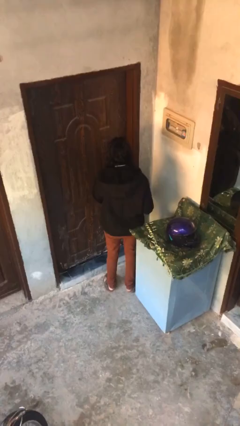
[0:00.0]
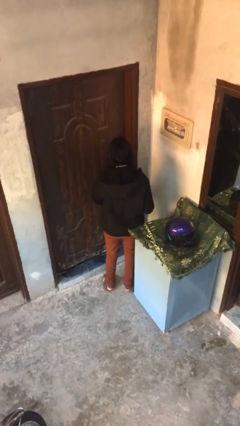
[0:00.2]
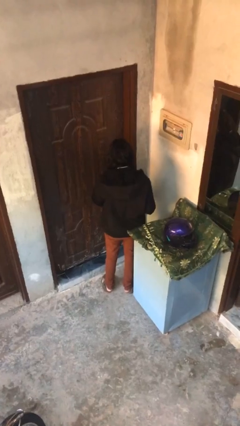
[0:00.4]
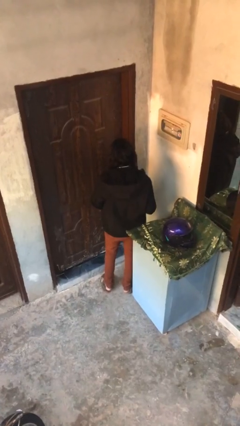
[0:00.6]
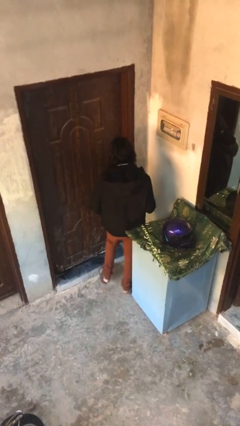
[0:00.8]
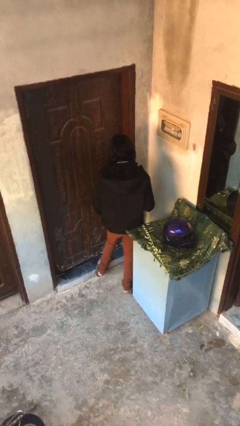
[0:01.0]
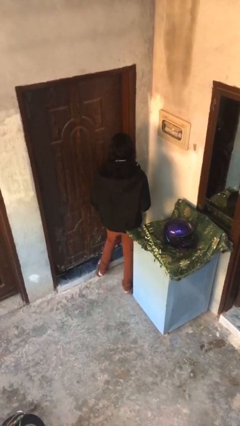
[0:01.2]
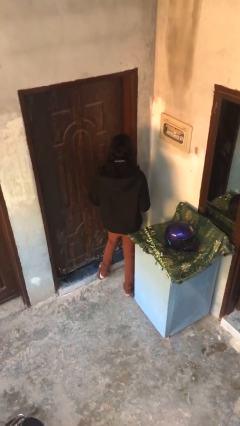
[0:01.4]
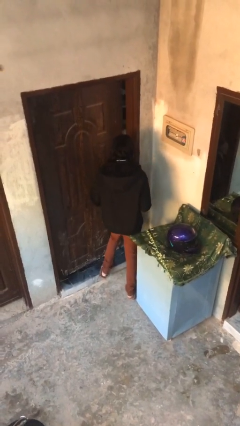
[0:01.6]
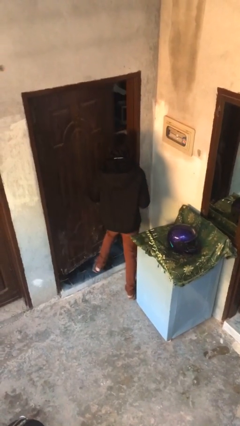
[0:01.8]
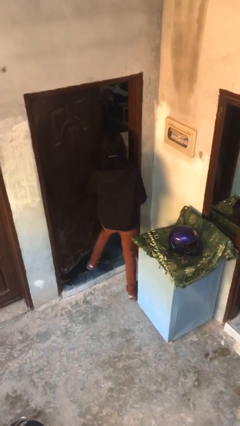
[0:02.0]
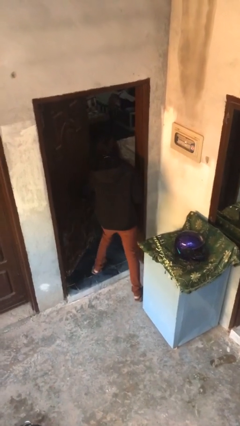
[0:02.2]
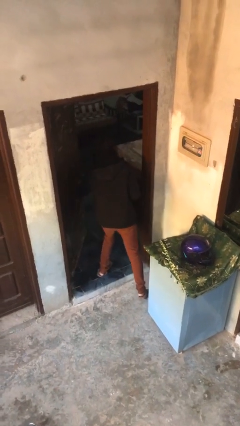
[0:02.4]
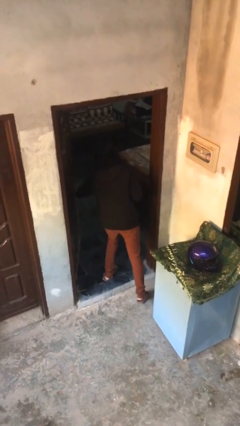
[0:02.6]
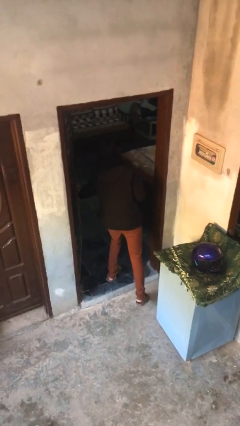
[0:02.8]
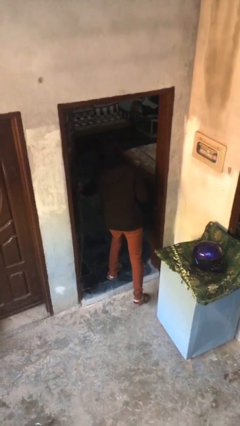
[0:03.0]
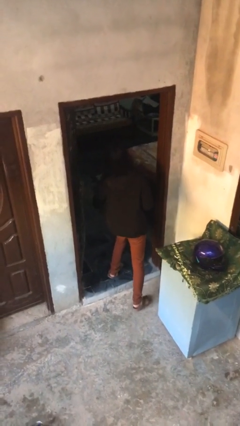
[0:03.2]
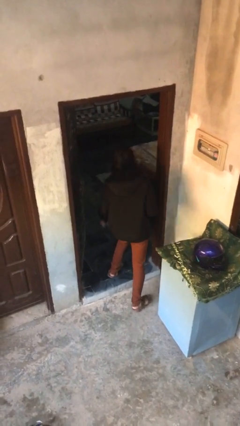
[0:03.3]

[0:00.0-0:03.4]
person opens facility door

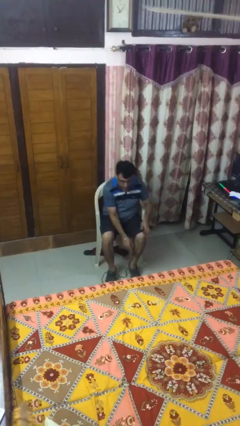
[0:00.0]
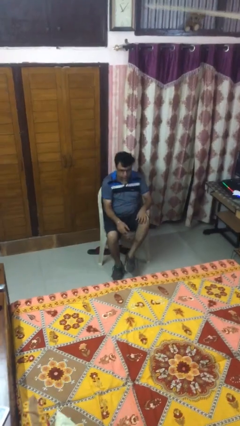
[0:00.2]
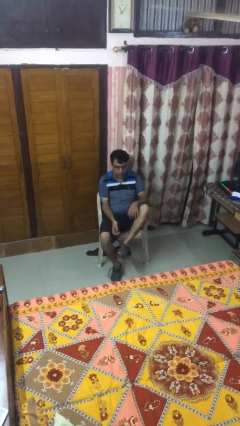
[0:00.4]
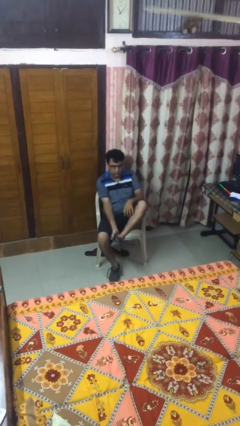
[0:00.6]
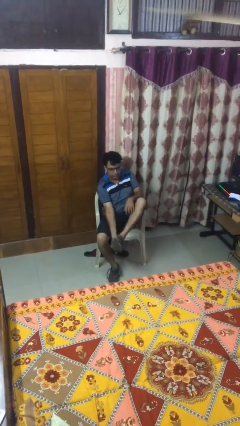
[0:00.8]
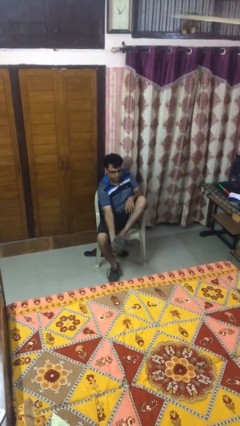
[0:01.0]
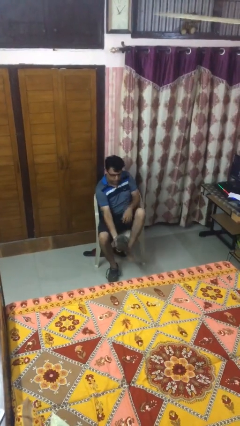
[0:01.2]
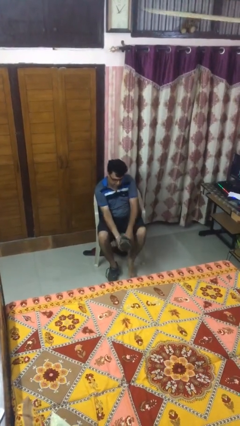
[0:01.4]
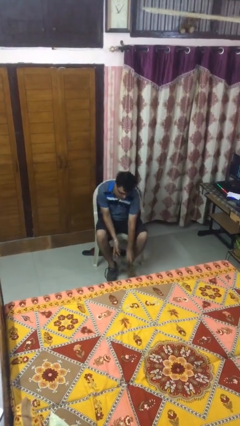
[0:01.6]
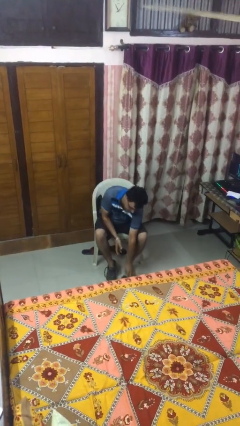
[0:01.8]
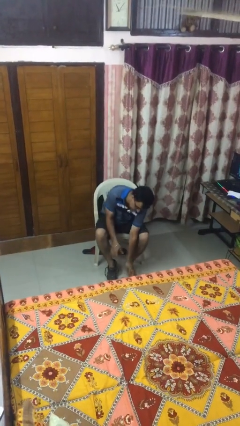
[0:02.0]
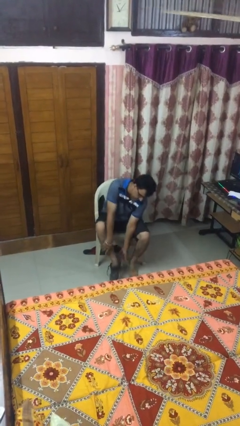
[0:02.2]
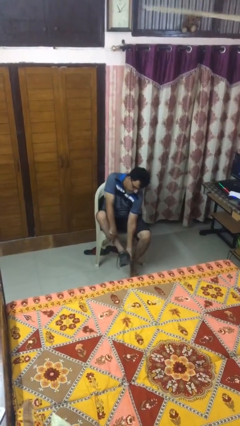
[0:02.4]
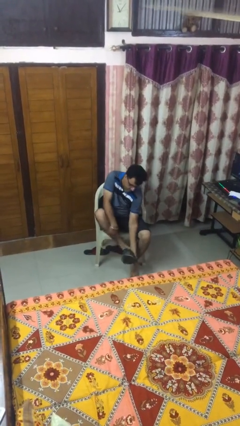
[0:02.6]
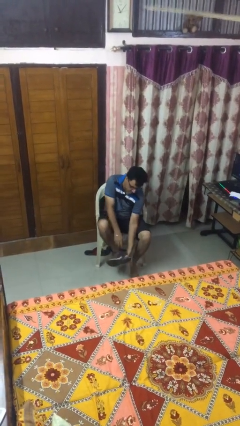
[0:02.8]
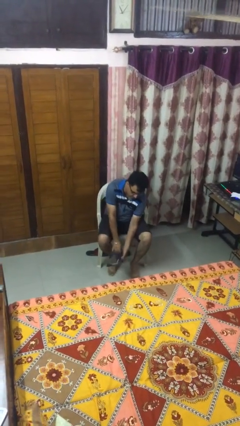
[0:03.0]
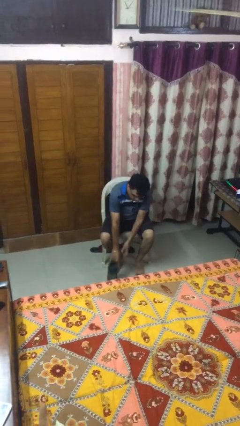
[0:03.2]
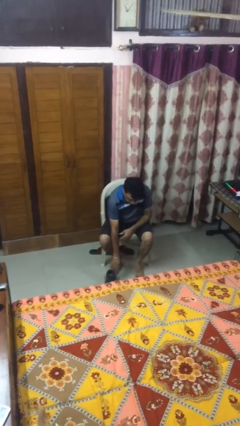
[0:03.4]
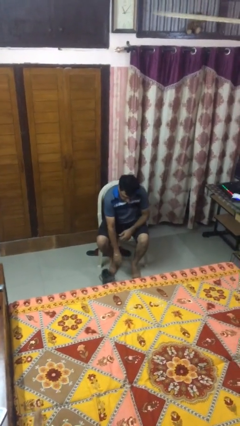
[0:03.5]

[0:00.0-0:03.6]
person takes off shoes

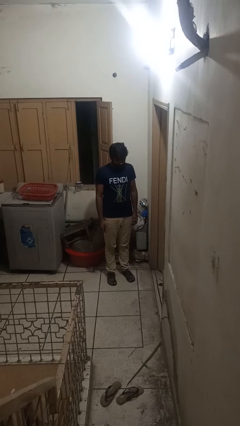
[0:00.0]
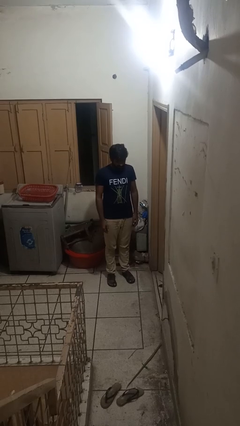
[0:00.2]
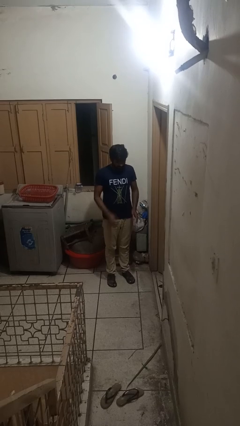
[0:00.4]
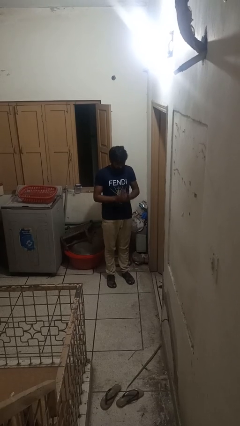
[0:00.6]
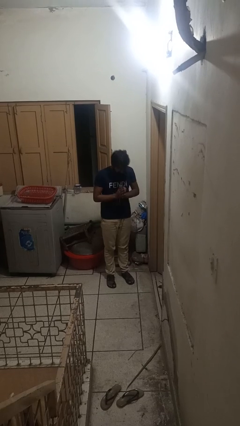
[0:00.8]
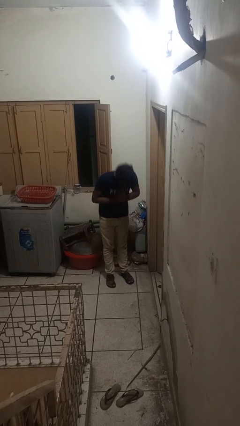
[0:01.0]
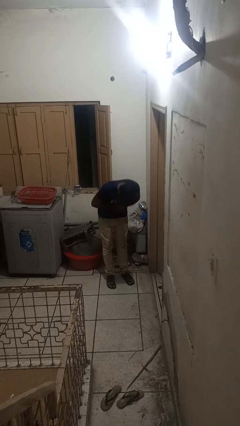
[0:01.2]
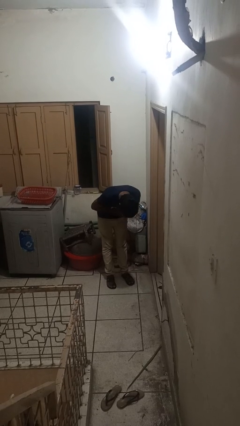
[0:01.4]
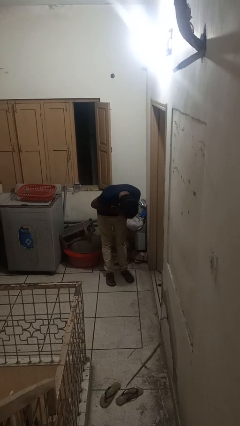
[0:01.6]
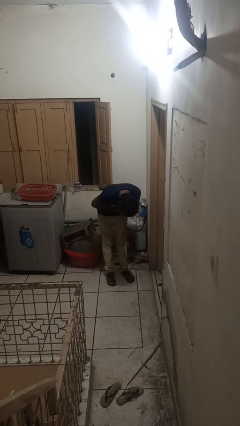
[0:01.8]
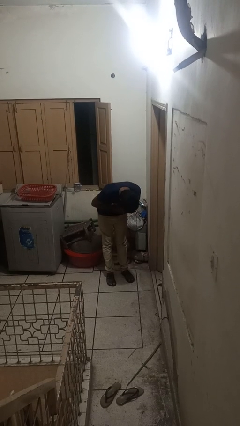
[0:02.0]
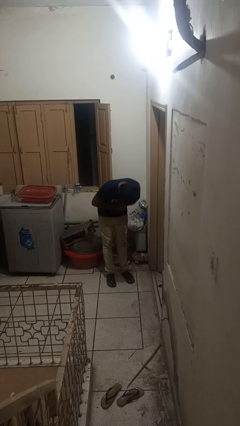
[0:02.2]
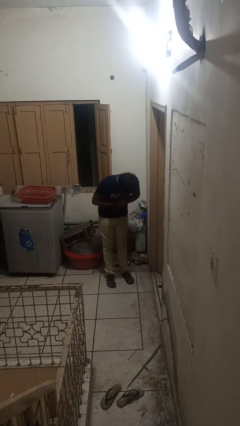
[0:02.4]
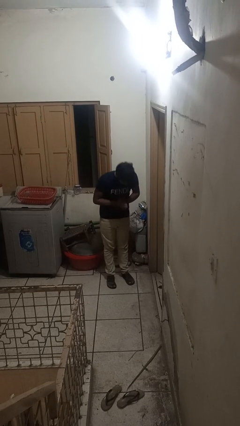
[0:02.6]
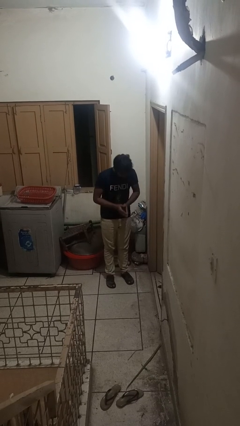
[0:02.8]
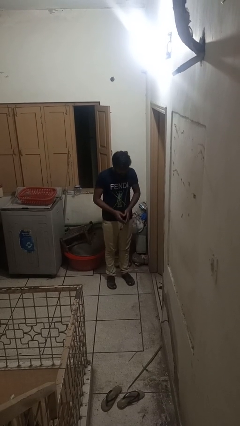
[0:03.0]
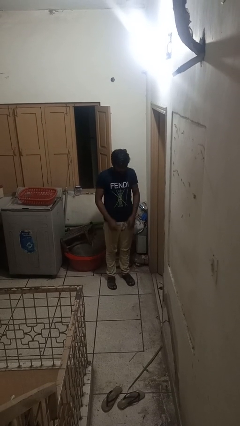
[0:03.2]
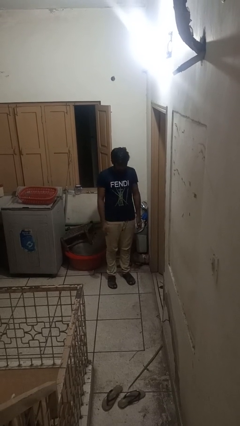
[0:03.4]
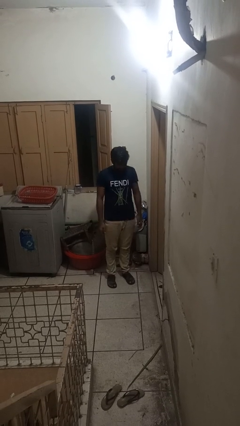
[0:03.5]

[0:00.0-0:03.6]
person bows

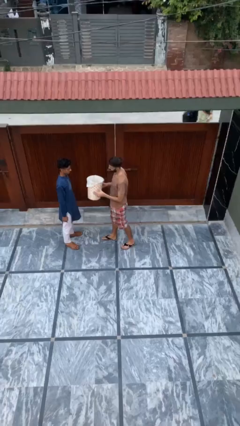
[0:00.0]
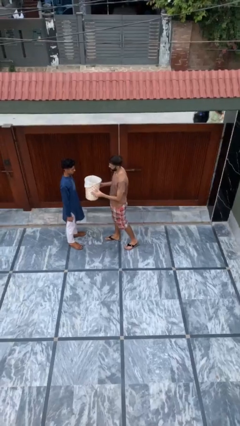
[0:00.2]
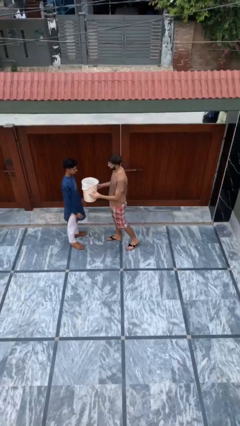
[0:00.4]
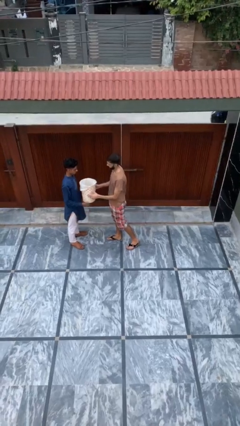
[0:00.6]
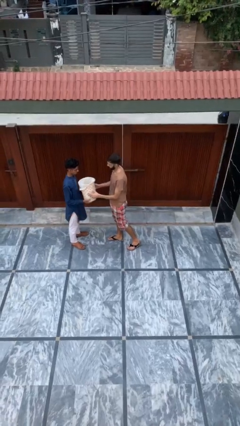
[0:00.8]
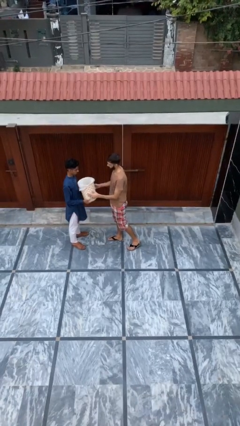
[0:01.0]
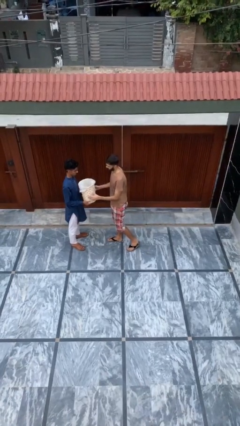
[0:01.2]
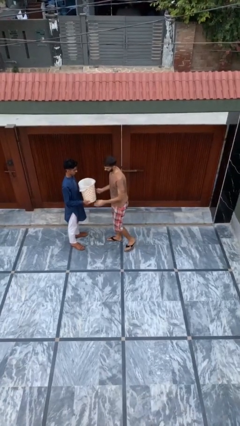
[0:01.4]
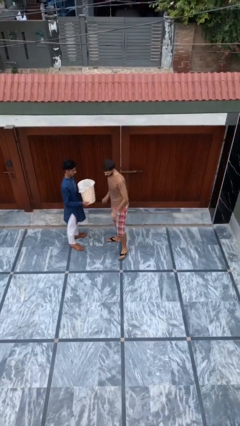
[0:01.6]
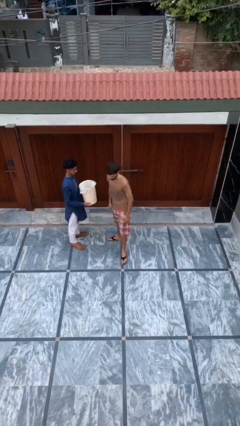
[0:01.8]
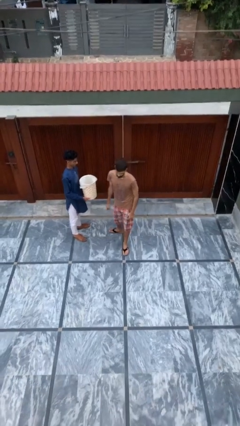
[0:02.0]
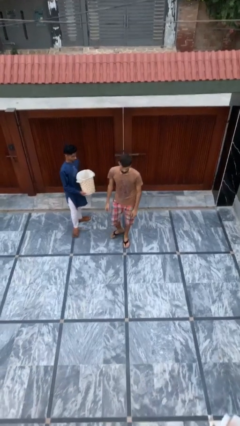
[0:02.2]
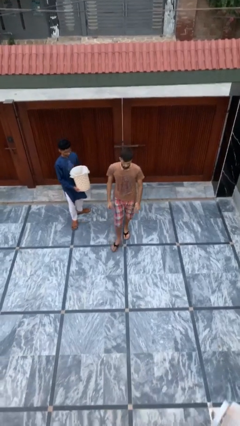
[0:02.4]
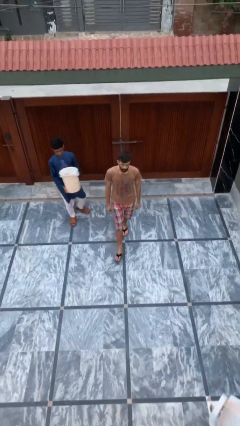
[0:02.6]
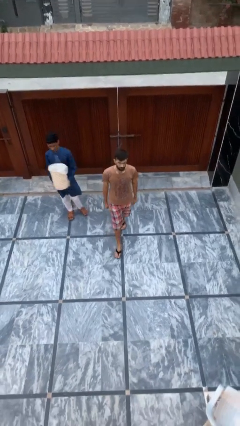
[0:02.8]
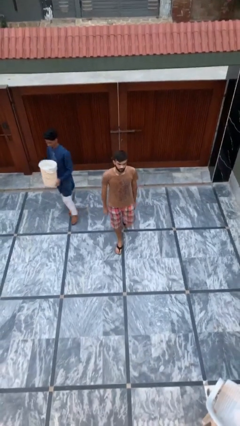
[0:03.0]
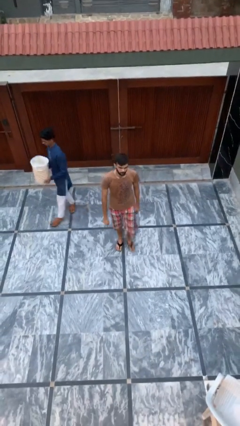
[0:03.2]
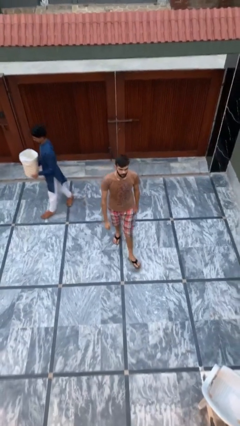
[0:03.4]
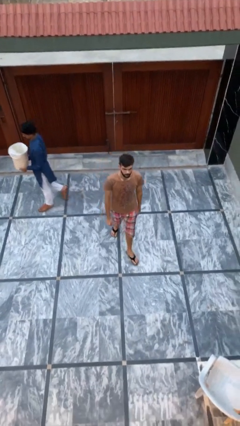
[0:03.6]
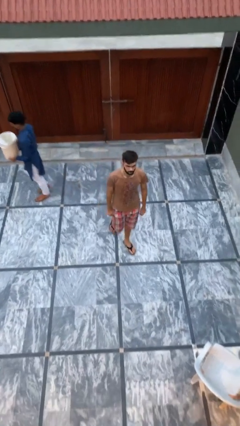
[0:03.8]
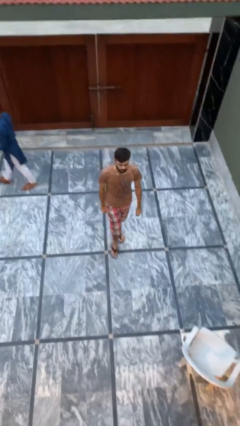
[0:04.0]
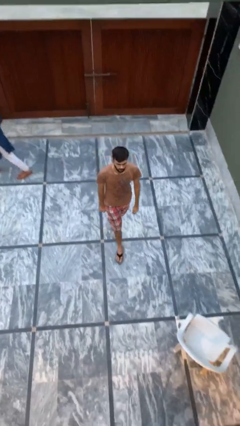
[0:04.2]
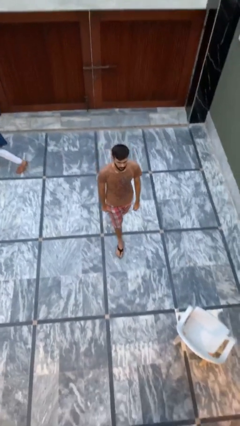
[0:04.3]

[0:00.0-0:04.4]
person transfers object to person

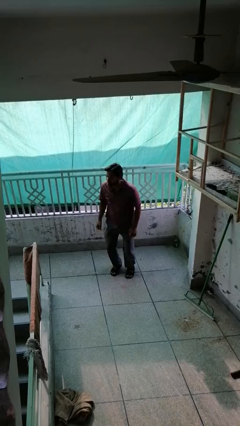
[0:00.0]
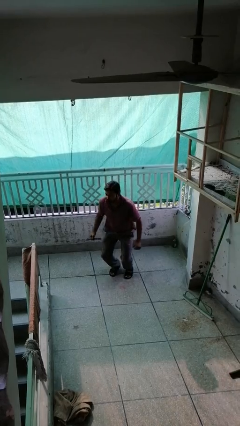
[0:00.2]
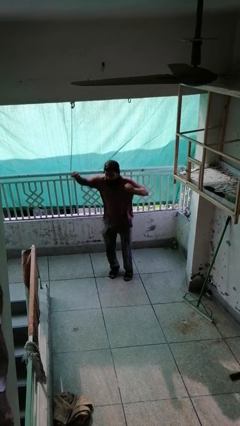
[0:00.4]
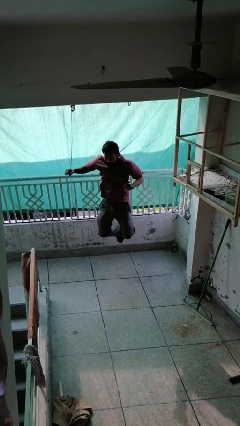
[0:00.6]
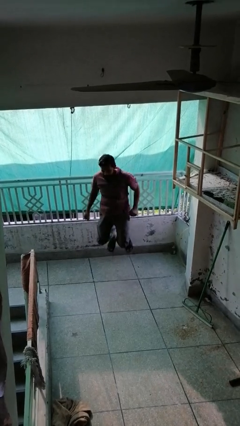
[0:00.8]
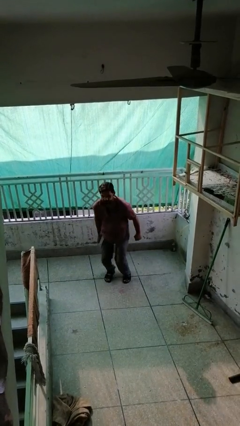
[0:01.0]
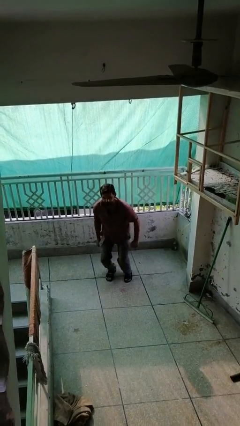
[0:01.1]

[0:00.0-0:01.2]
person jumps

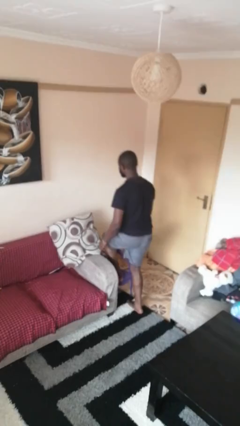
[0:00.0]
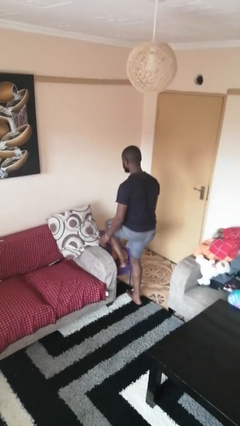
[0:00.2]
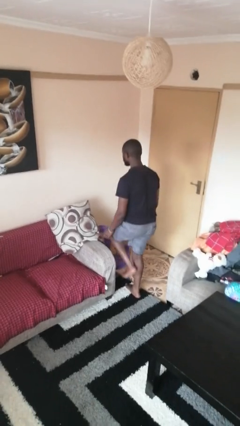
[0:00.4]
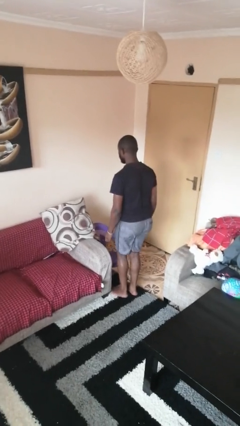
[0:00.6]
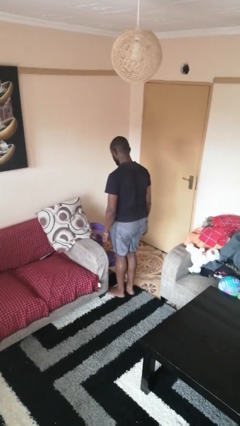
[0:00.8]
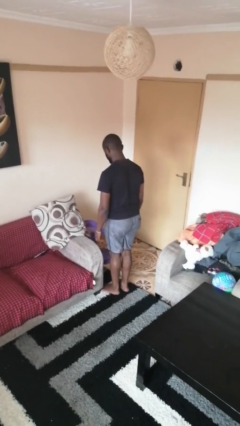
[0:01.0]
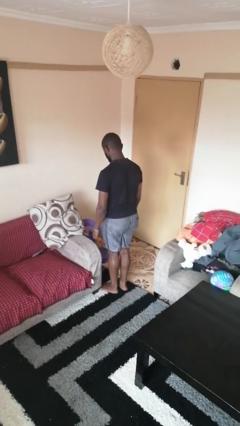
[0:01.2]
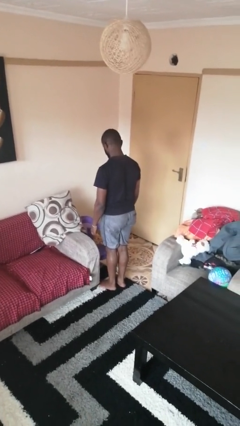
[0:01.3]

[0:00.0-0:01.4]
person climbs off chair
